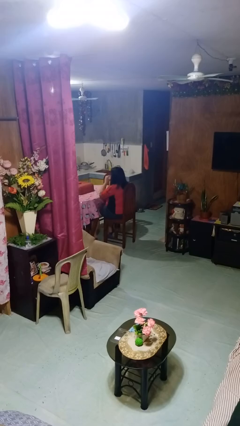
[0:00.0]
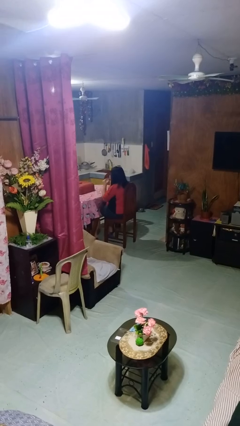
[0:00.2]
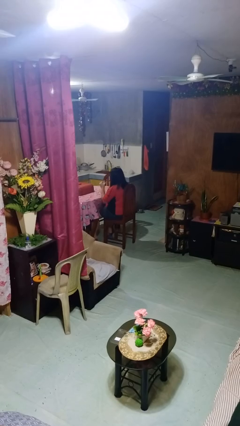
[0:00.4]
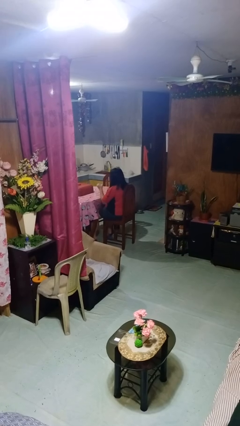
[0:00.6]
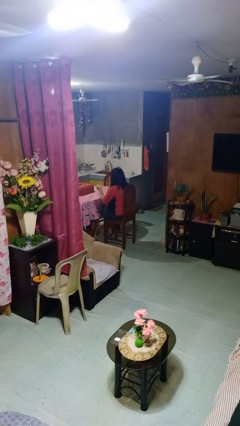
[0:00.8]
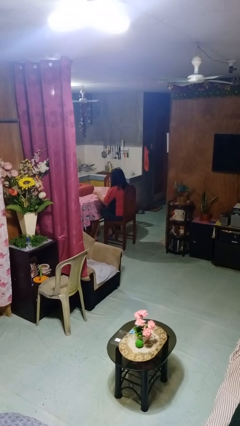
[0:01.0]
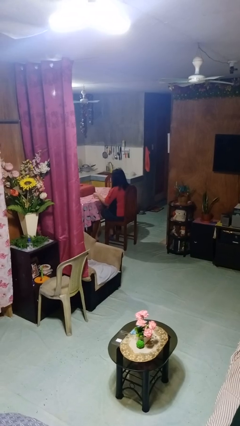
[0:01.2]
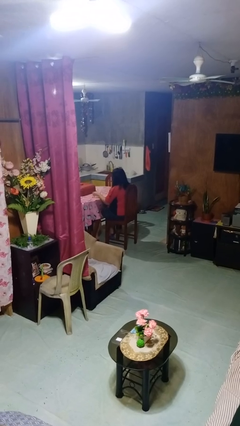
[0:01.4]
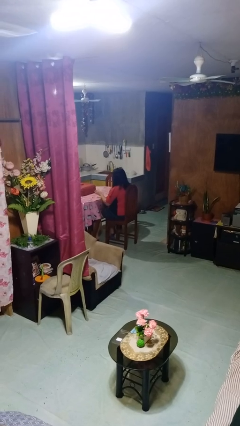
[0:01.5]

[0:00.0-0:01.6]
person puts down object on table

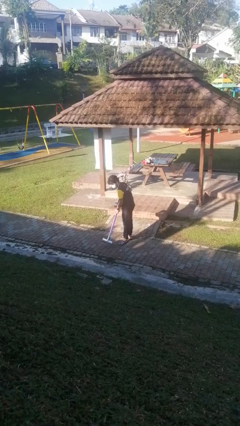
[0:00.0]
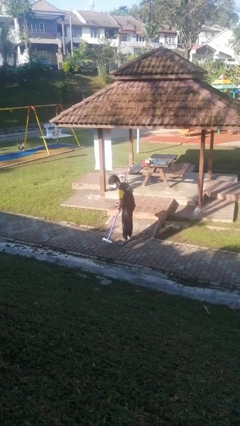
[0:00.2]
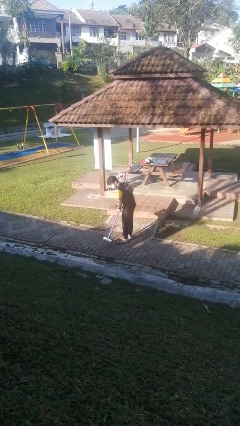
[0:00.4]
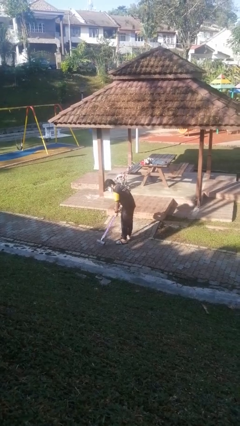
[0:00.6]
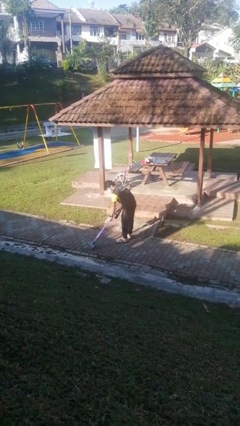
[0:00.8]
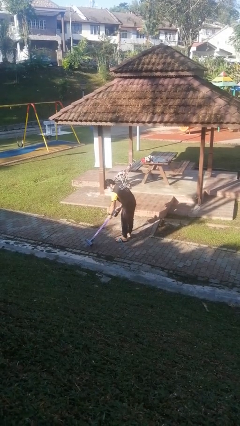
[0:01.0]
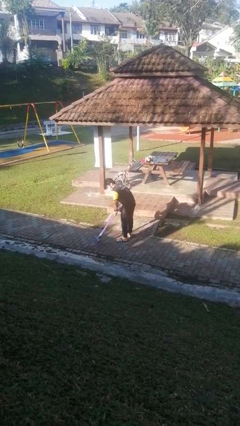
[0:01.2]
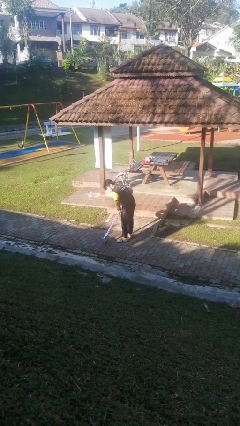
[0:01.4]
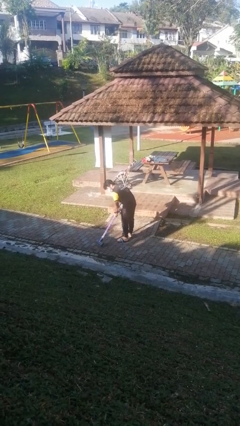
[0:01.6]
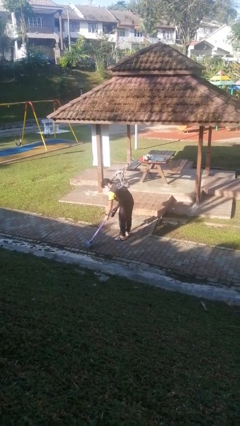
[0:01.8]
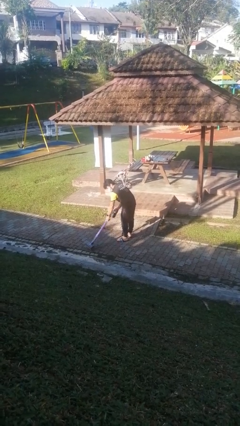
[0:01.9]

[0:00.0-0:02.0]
person vacuums carpet

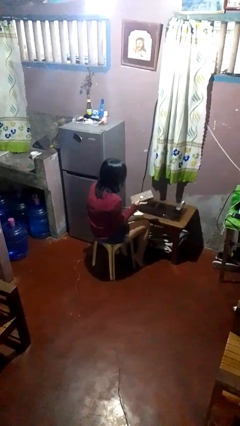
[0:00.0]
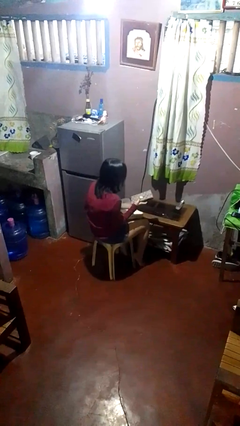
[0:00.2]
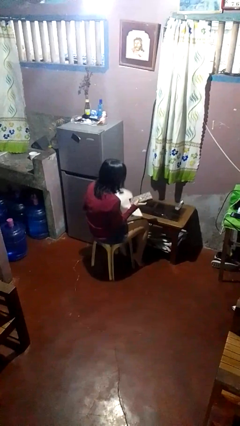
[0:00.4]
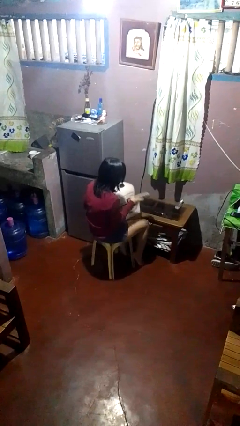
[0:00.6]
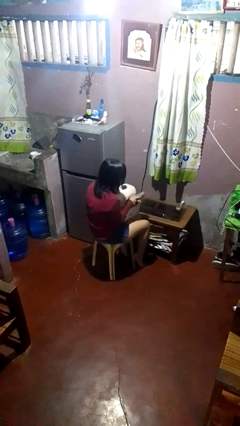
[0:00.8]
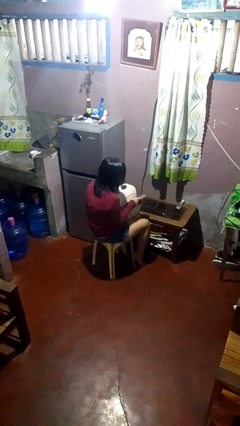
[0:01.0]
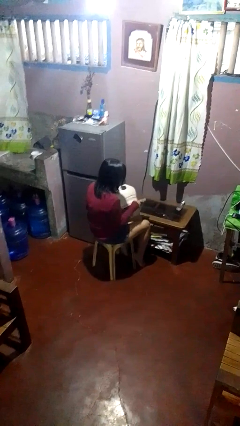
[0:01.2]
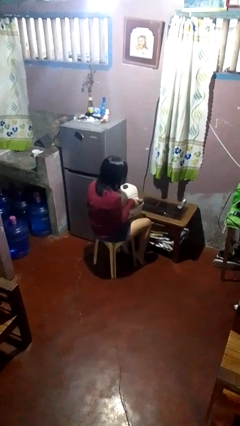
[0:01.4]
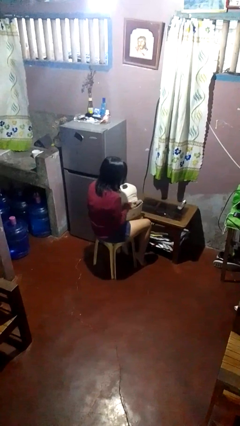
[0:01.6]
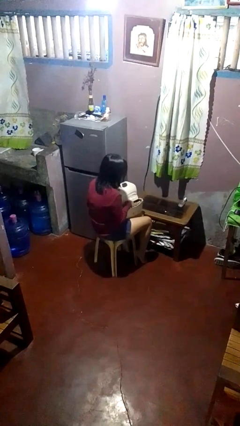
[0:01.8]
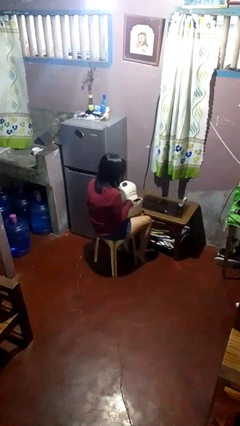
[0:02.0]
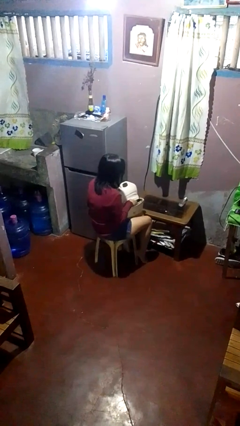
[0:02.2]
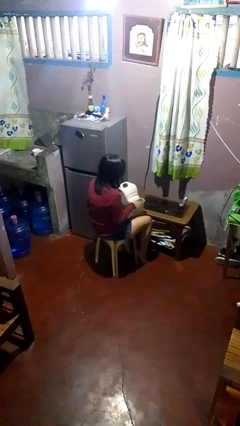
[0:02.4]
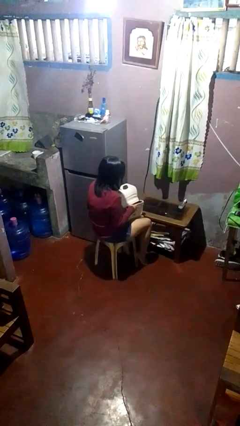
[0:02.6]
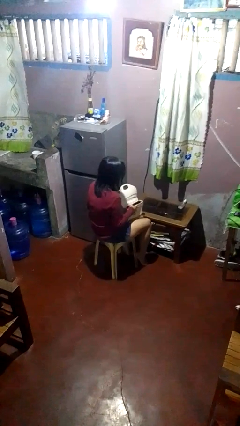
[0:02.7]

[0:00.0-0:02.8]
person puts object into purse

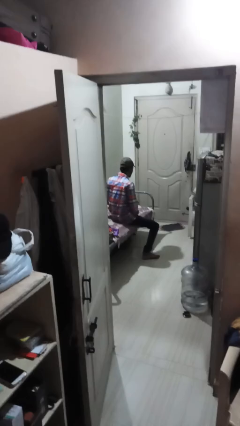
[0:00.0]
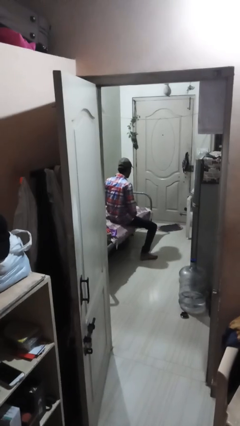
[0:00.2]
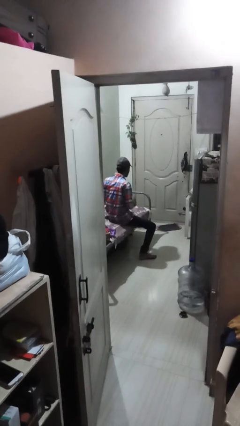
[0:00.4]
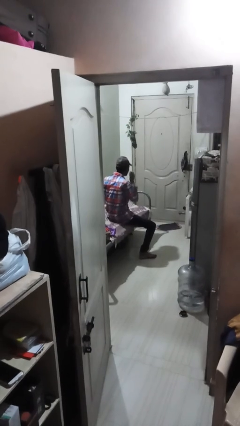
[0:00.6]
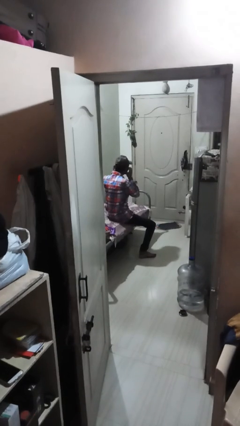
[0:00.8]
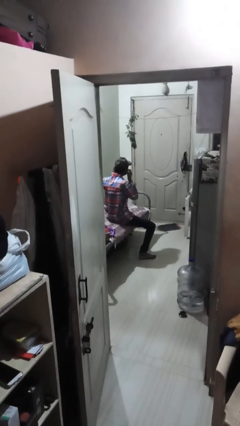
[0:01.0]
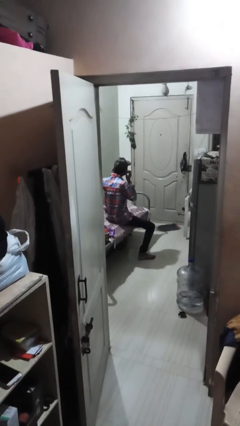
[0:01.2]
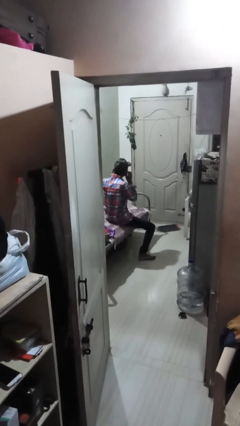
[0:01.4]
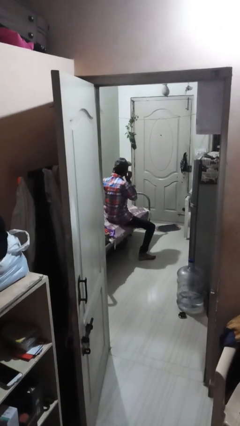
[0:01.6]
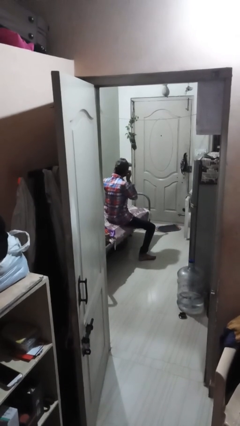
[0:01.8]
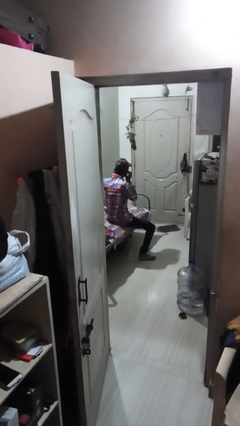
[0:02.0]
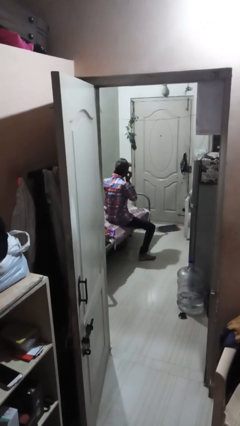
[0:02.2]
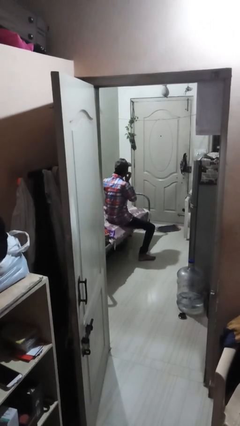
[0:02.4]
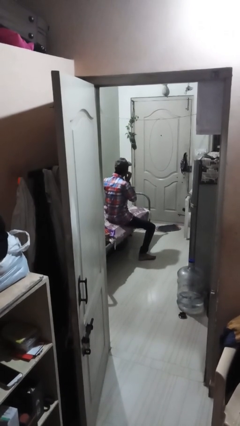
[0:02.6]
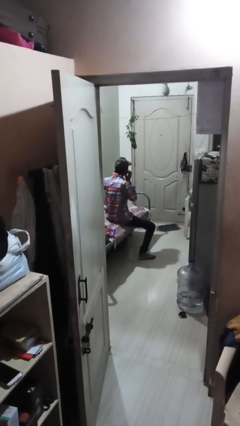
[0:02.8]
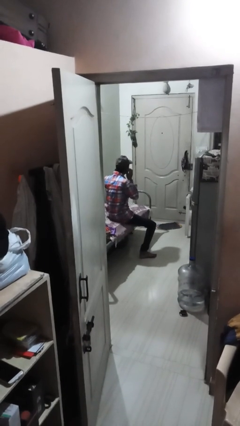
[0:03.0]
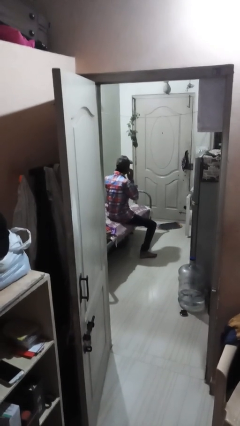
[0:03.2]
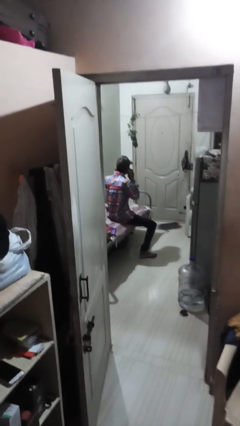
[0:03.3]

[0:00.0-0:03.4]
person touches earlobe

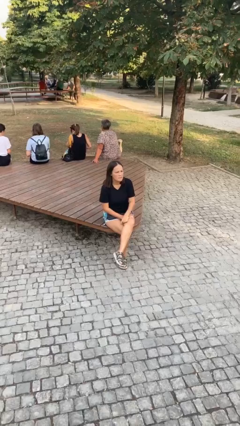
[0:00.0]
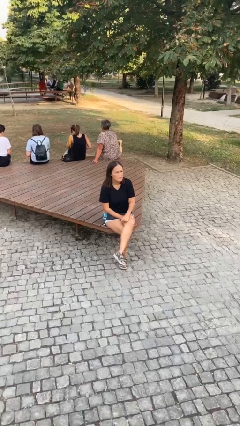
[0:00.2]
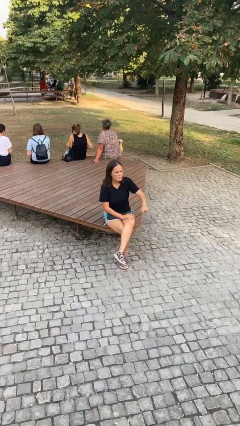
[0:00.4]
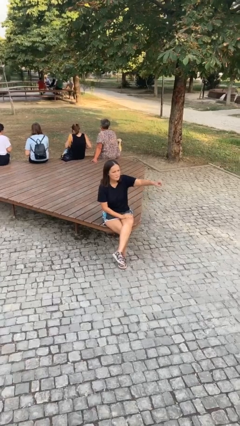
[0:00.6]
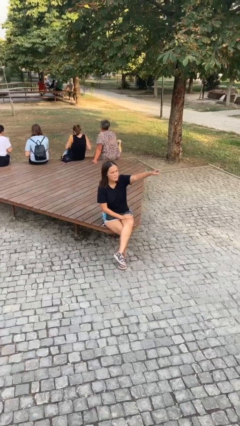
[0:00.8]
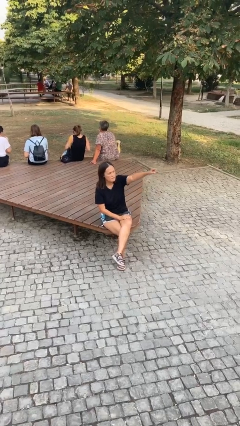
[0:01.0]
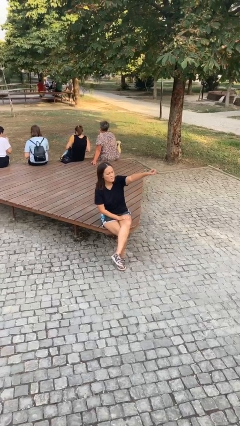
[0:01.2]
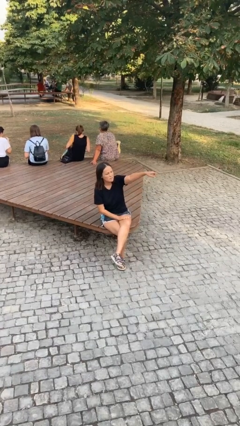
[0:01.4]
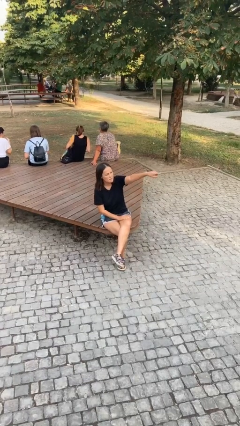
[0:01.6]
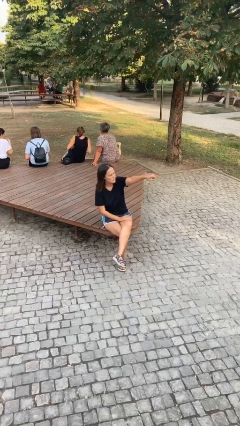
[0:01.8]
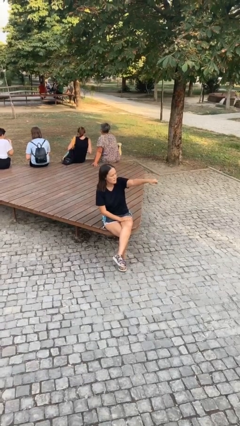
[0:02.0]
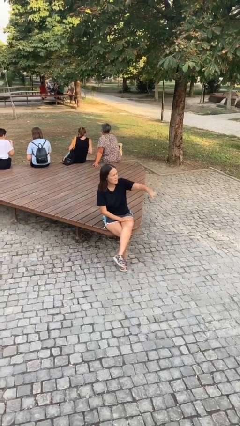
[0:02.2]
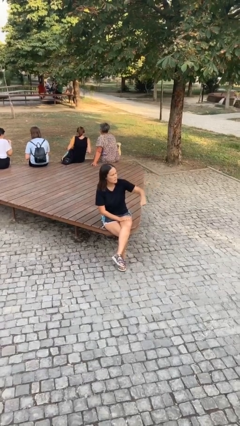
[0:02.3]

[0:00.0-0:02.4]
person points at person

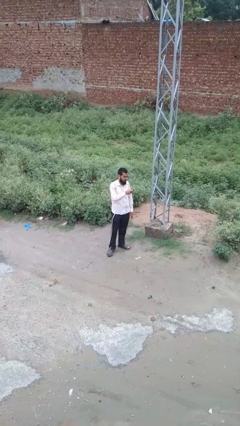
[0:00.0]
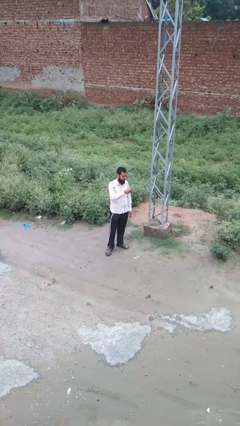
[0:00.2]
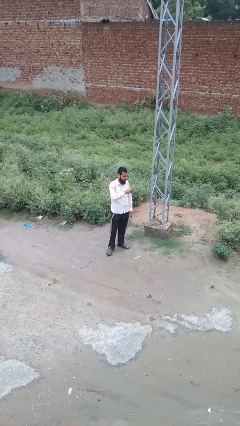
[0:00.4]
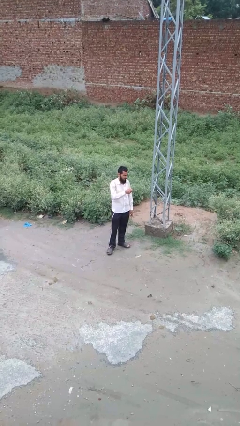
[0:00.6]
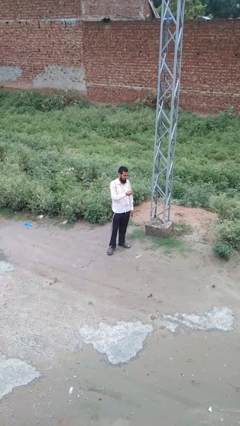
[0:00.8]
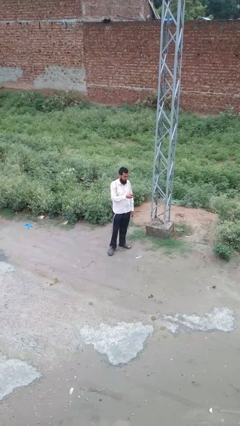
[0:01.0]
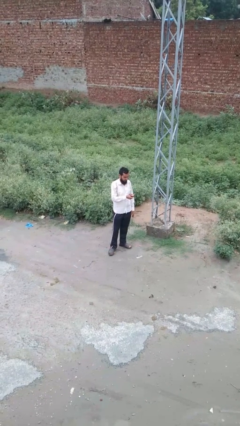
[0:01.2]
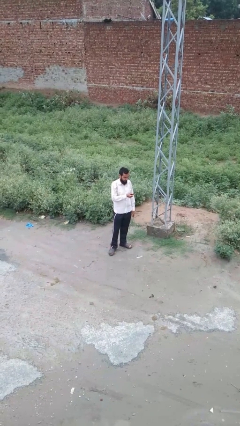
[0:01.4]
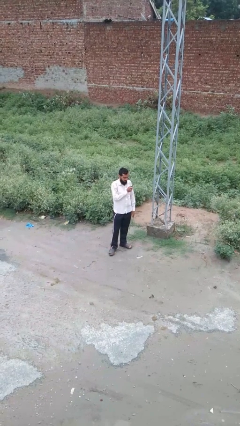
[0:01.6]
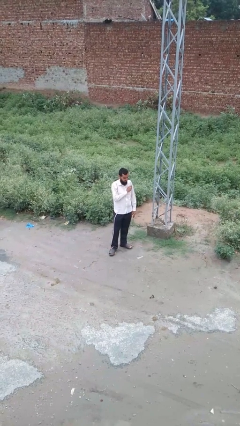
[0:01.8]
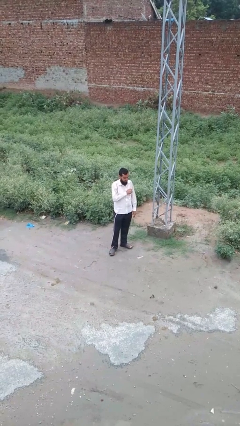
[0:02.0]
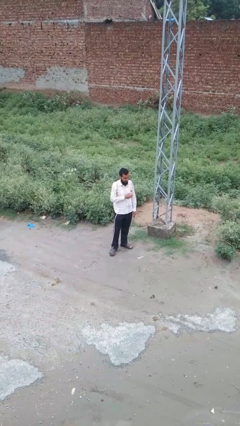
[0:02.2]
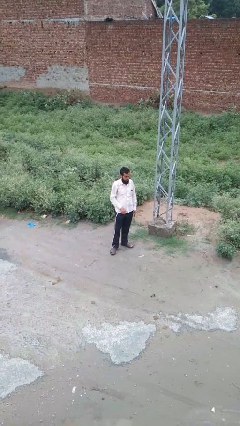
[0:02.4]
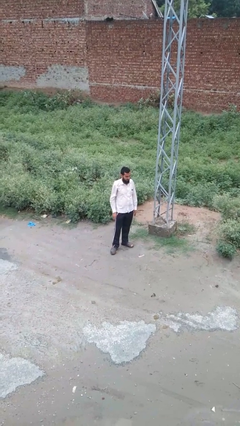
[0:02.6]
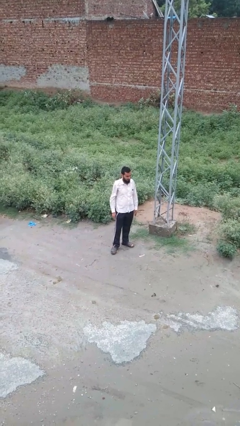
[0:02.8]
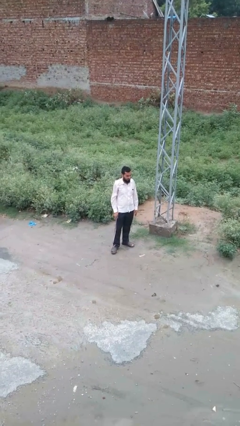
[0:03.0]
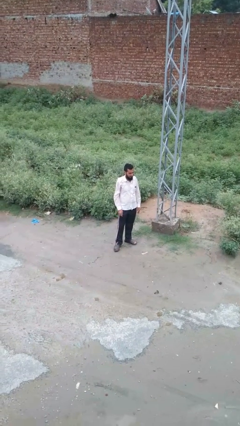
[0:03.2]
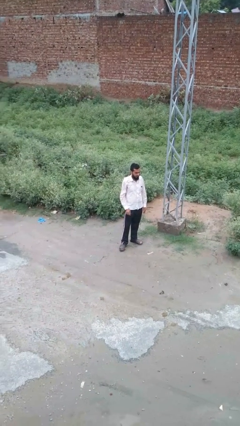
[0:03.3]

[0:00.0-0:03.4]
person puts phone into pocket

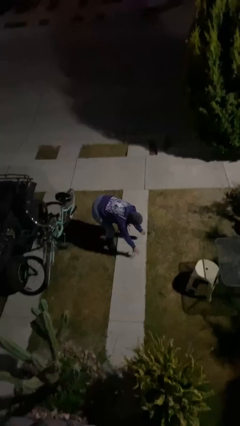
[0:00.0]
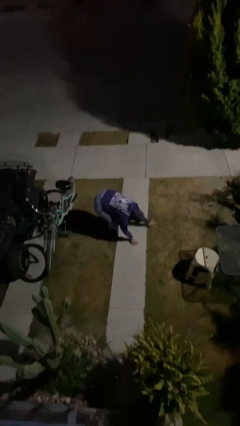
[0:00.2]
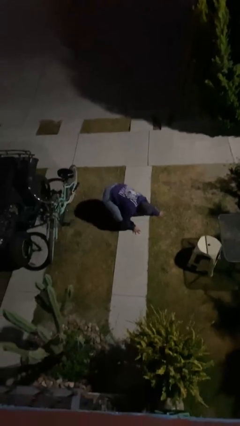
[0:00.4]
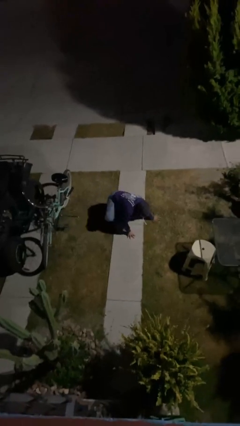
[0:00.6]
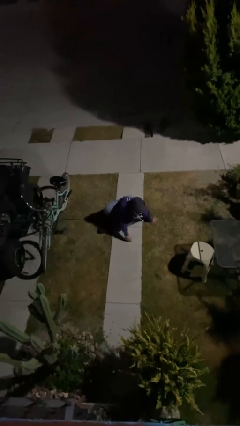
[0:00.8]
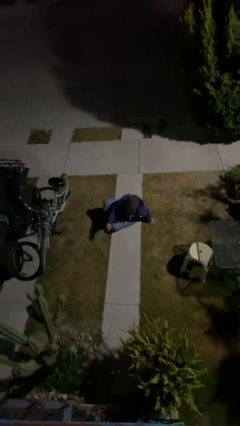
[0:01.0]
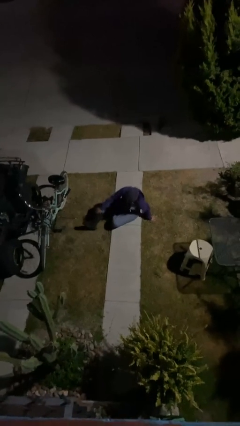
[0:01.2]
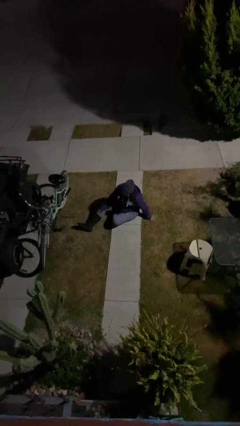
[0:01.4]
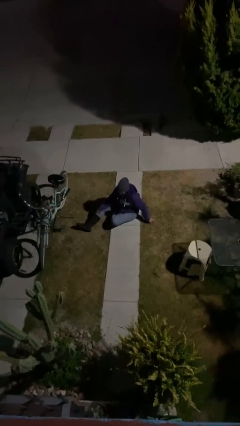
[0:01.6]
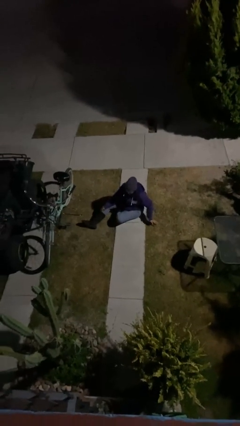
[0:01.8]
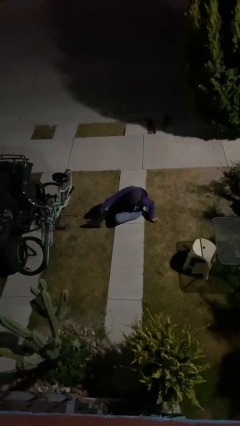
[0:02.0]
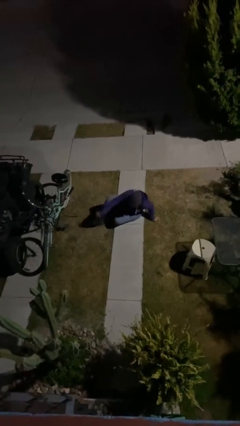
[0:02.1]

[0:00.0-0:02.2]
person sits down
